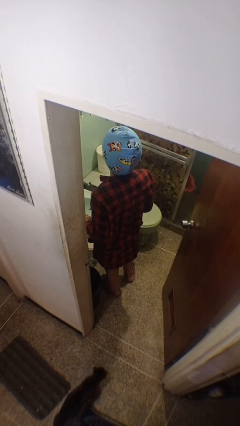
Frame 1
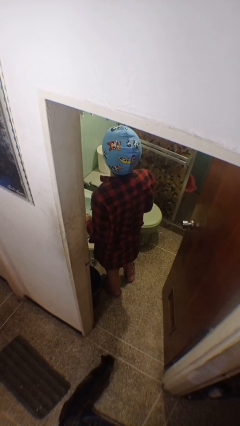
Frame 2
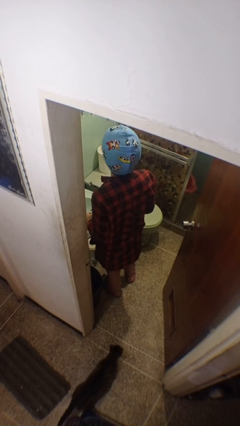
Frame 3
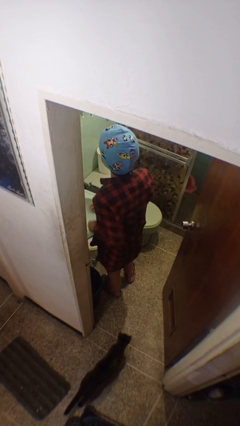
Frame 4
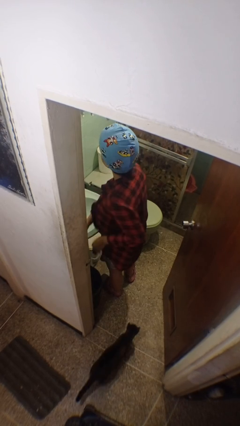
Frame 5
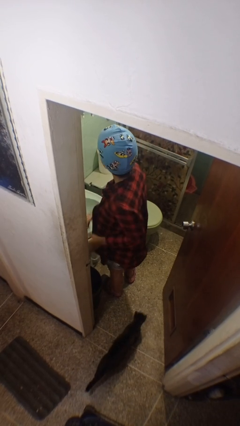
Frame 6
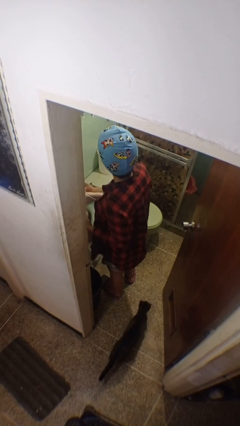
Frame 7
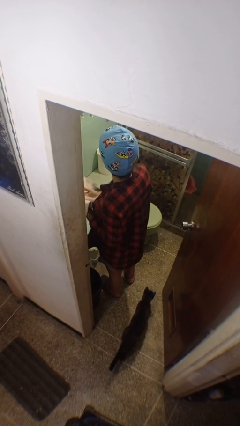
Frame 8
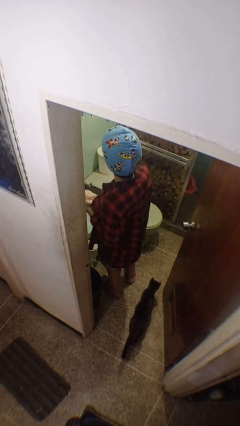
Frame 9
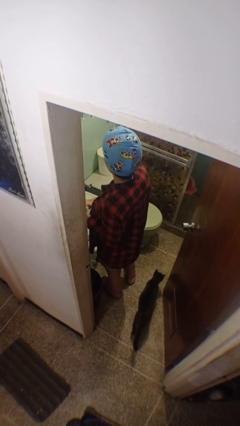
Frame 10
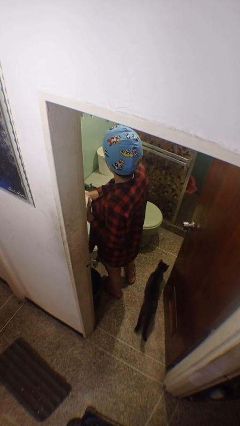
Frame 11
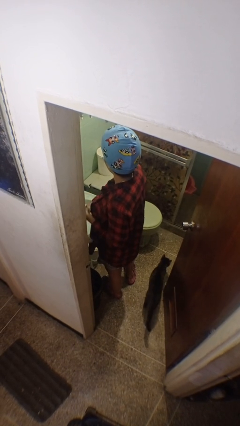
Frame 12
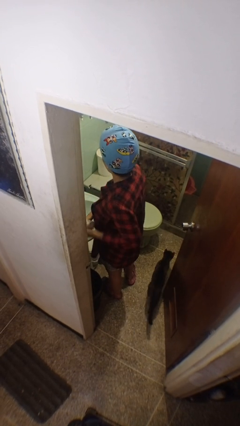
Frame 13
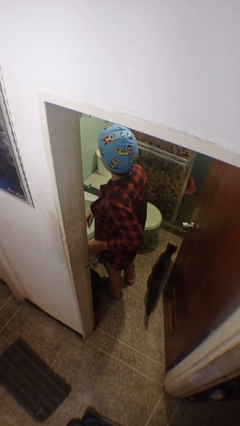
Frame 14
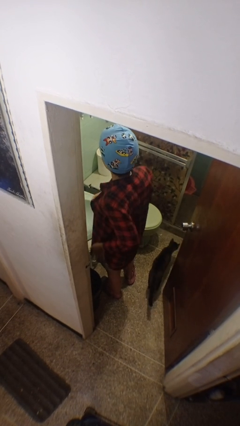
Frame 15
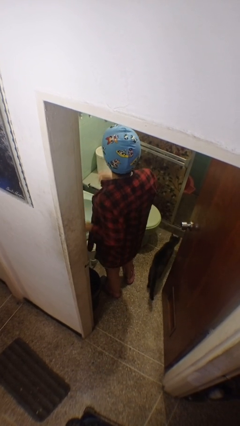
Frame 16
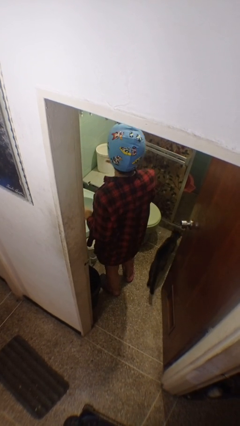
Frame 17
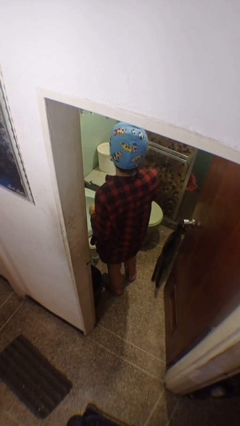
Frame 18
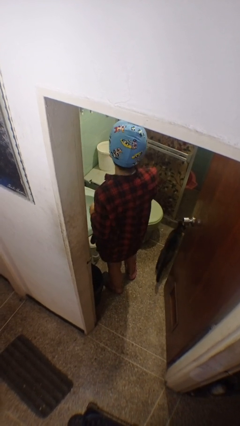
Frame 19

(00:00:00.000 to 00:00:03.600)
person dries hands with towel

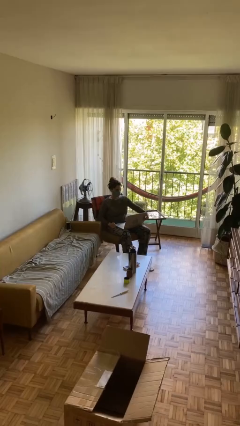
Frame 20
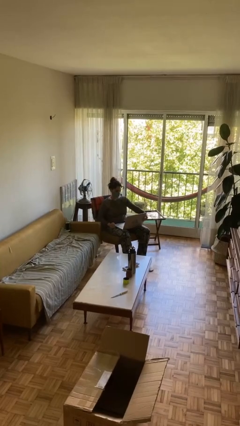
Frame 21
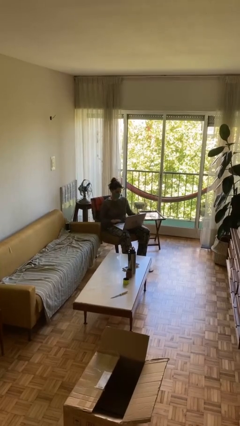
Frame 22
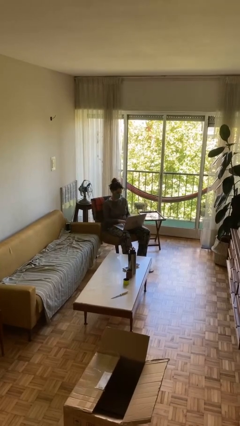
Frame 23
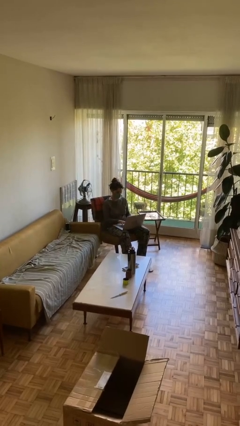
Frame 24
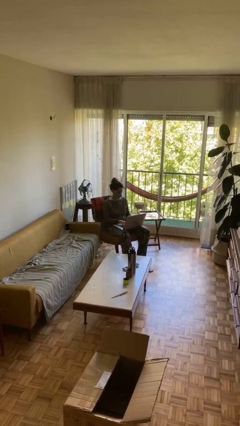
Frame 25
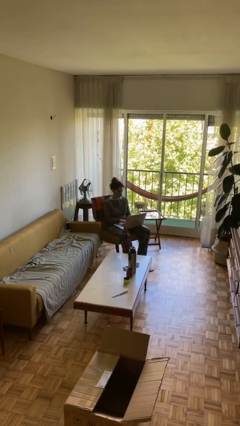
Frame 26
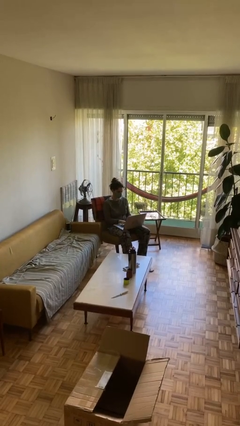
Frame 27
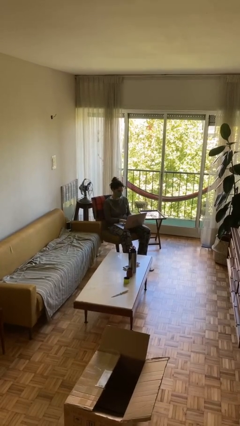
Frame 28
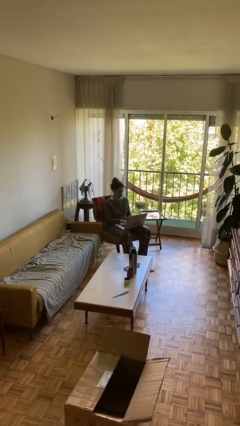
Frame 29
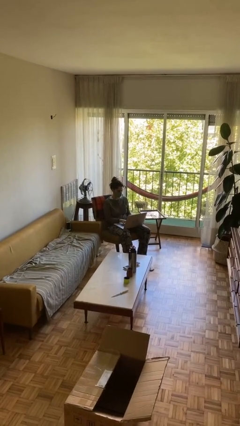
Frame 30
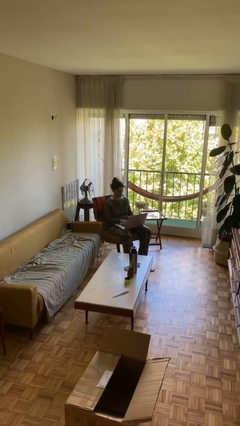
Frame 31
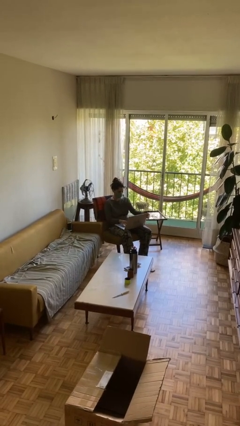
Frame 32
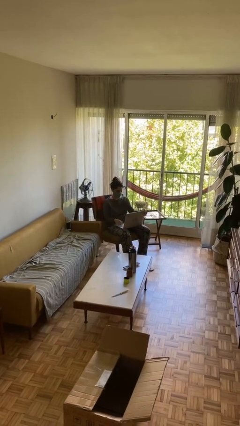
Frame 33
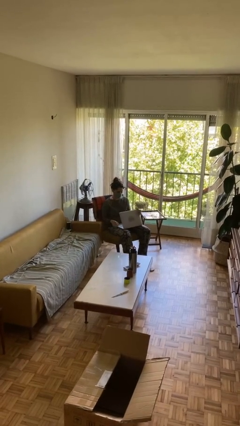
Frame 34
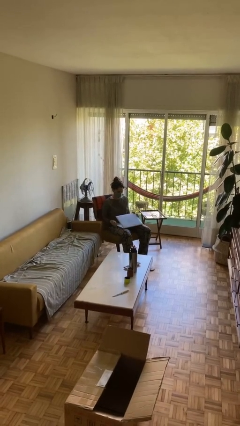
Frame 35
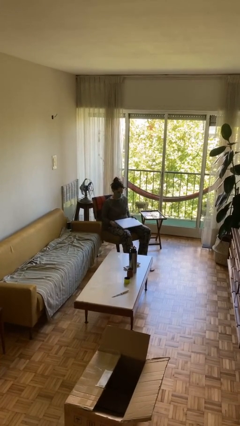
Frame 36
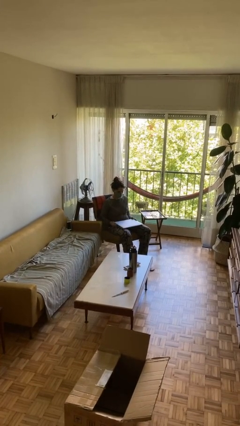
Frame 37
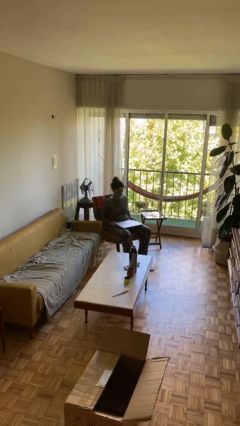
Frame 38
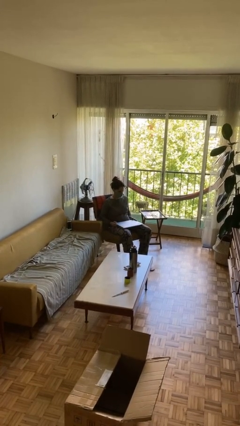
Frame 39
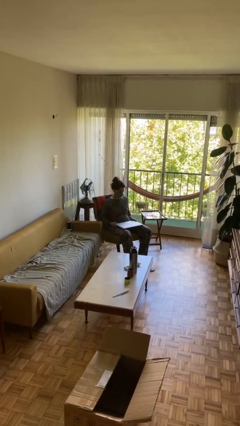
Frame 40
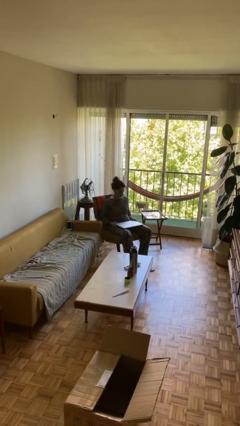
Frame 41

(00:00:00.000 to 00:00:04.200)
person interacts with laptop

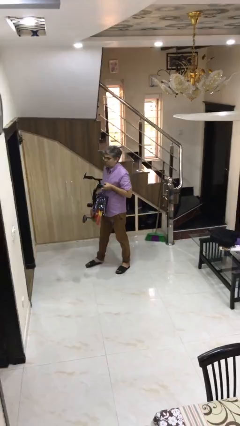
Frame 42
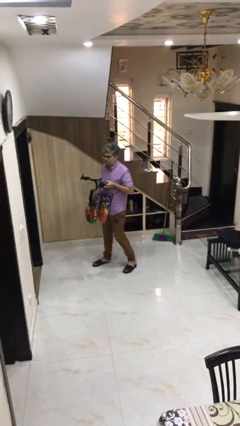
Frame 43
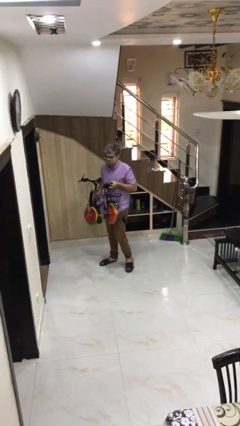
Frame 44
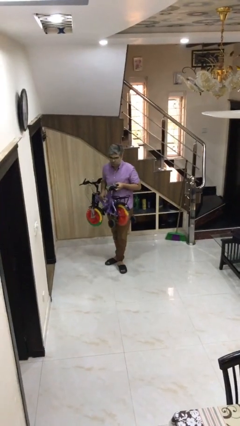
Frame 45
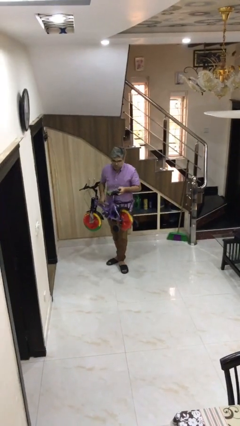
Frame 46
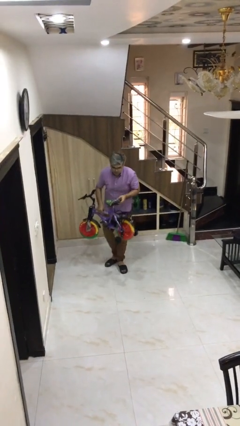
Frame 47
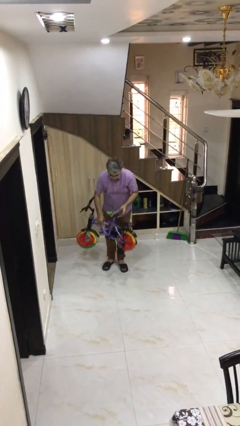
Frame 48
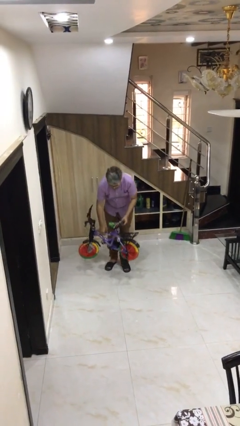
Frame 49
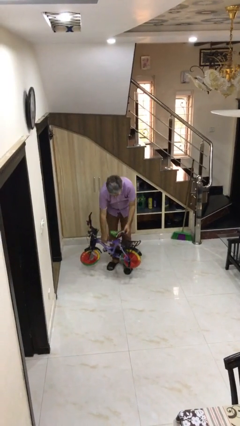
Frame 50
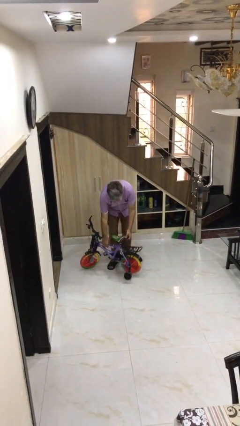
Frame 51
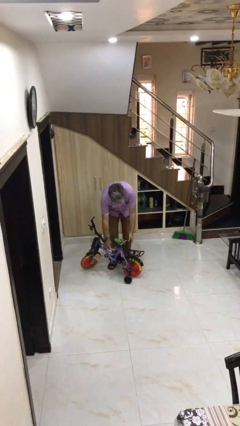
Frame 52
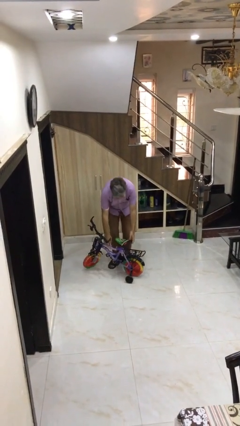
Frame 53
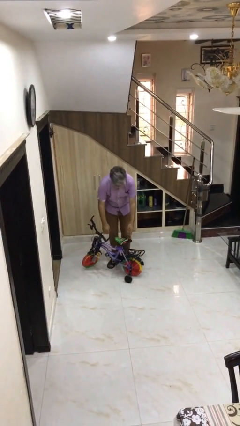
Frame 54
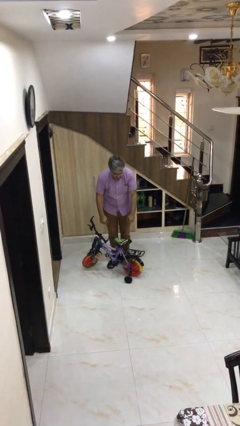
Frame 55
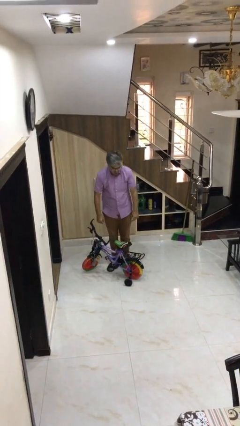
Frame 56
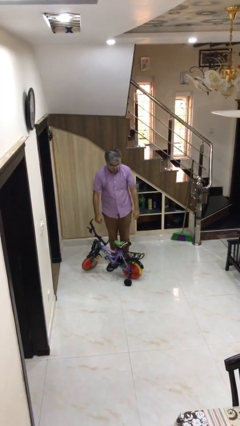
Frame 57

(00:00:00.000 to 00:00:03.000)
person puts down object on floor

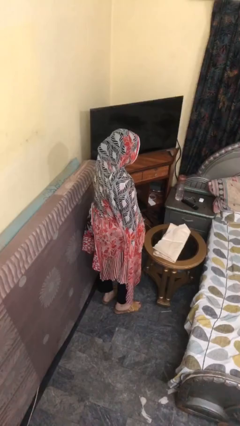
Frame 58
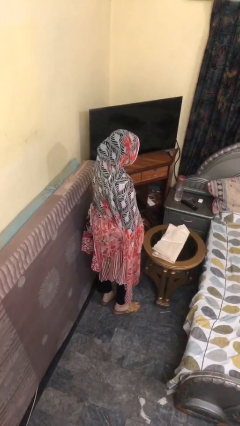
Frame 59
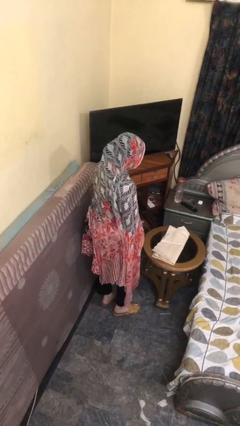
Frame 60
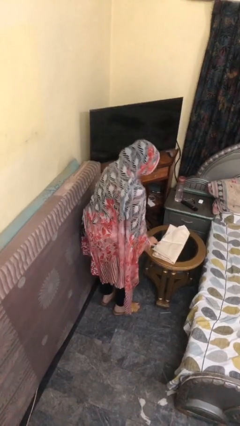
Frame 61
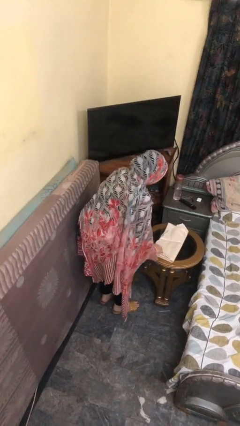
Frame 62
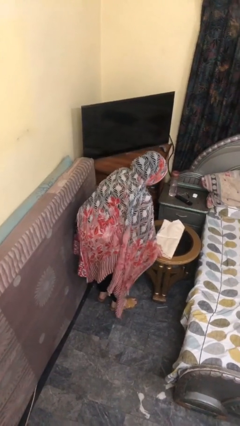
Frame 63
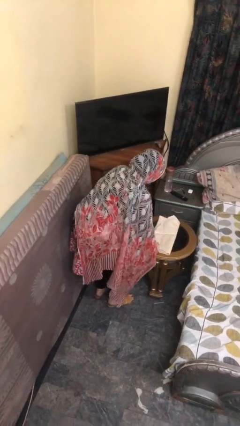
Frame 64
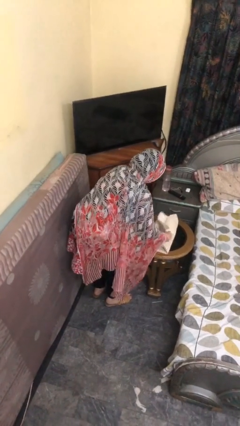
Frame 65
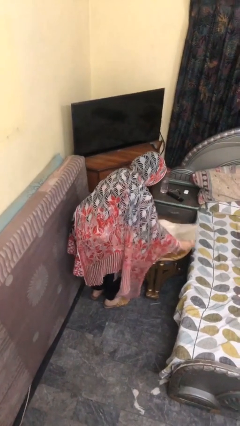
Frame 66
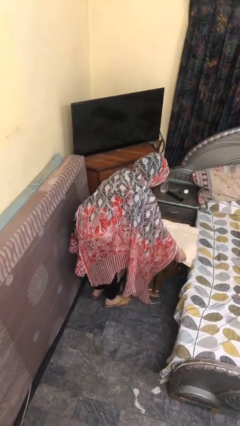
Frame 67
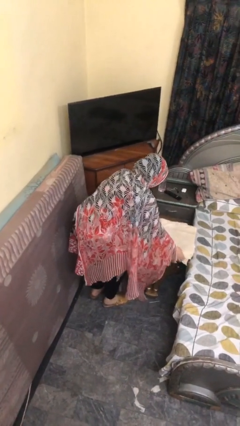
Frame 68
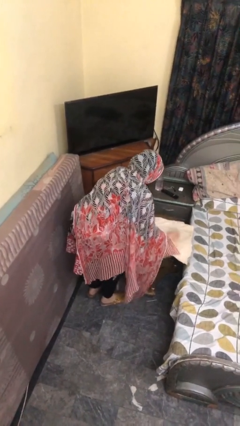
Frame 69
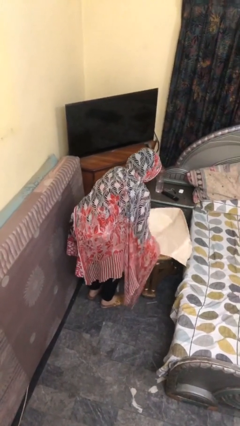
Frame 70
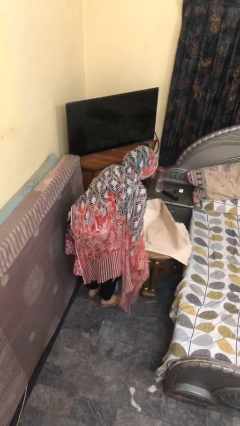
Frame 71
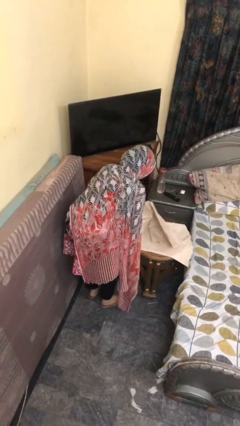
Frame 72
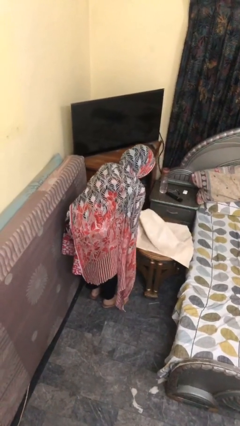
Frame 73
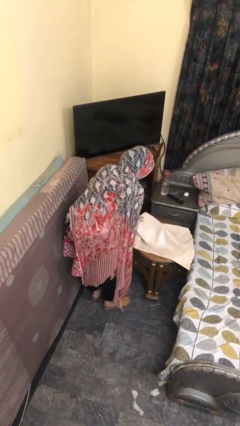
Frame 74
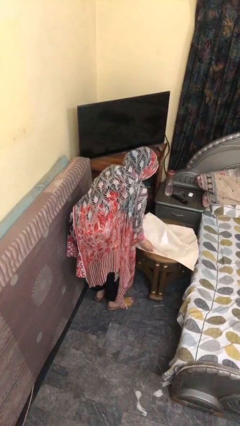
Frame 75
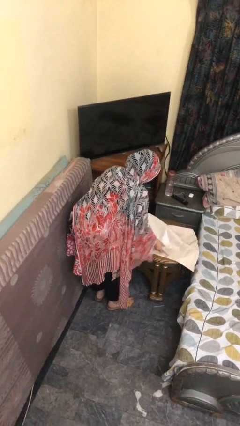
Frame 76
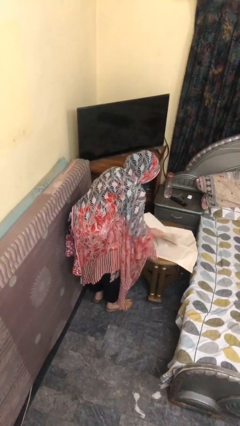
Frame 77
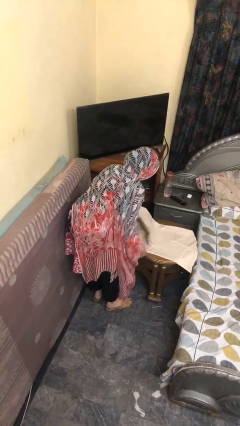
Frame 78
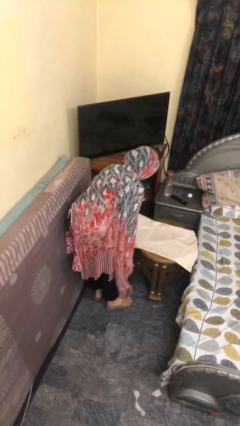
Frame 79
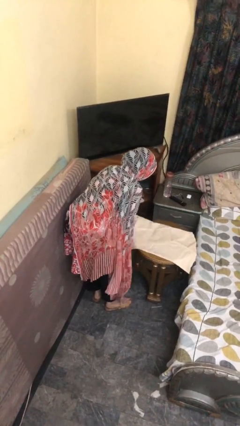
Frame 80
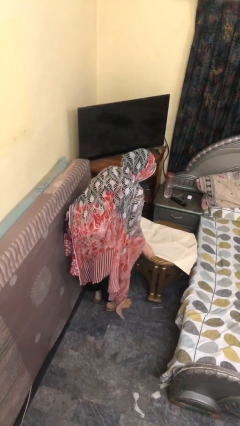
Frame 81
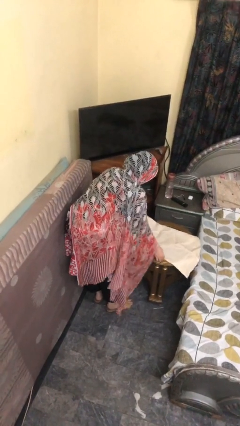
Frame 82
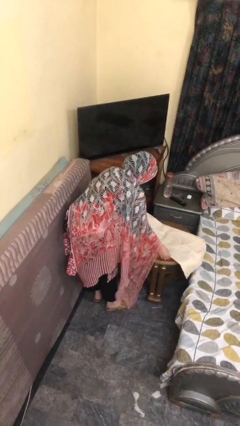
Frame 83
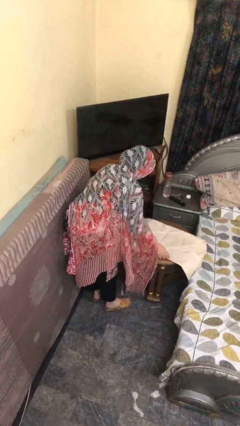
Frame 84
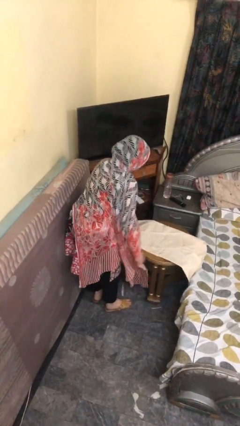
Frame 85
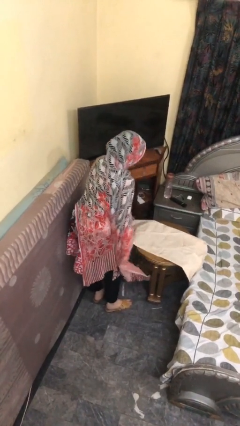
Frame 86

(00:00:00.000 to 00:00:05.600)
person spreads tablecloth

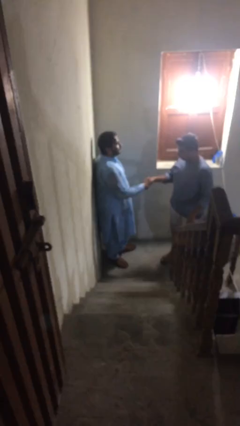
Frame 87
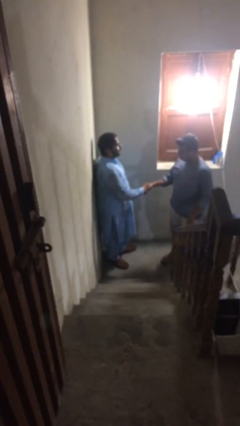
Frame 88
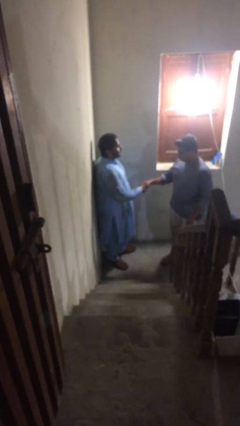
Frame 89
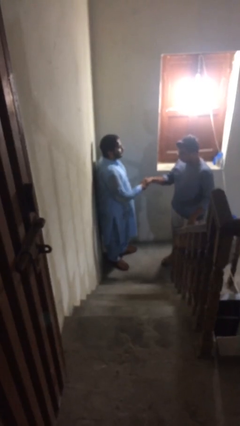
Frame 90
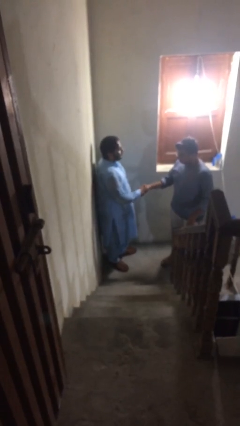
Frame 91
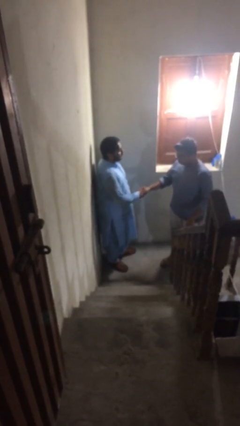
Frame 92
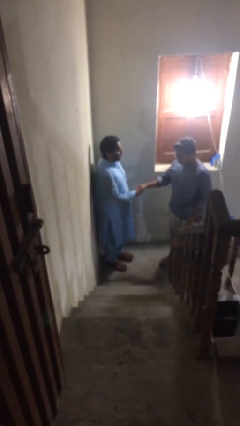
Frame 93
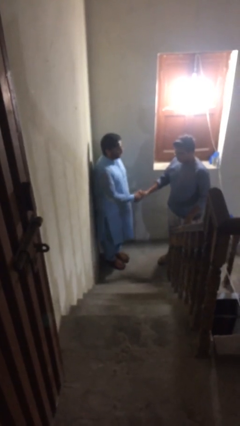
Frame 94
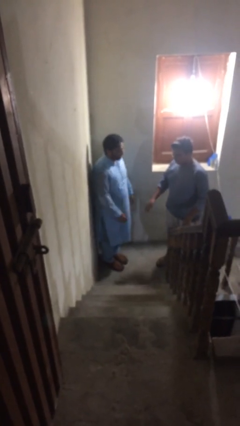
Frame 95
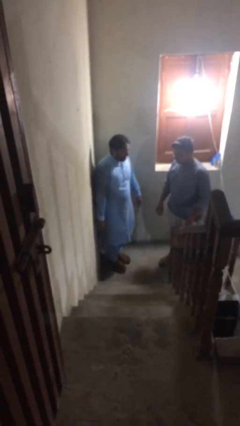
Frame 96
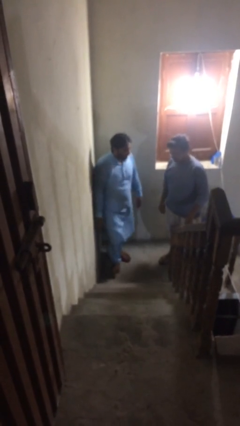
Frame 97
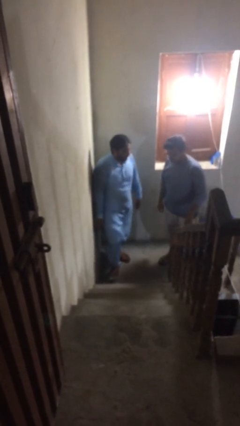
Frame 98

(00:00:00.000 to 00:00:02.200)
person shakes hand
